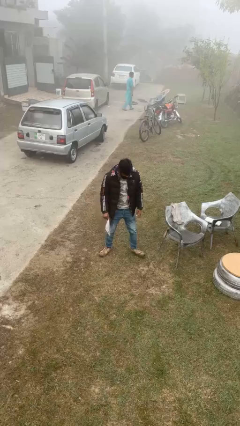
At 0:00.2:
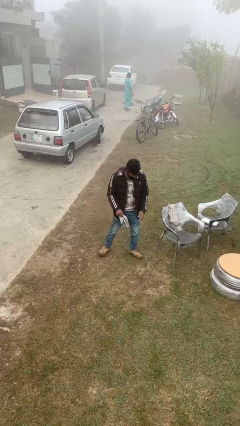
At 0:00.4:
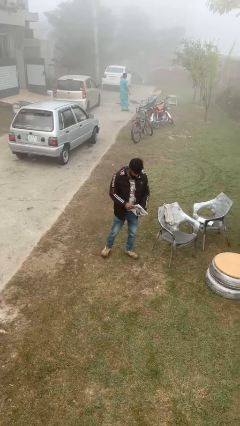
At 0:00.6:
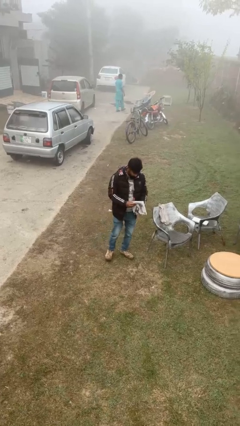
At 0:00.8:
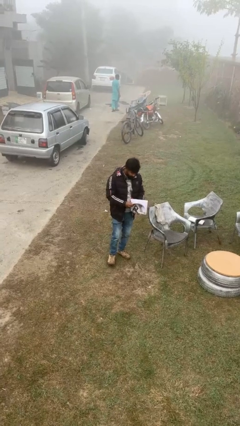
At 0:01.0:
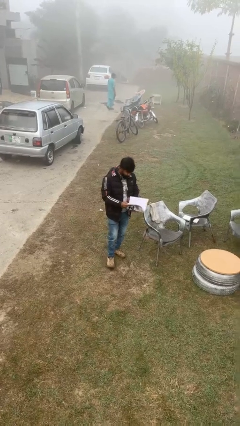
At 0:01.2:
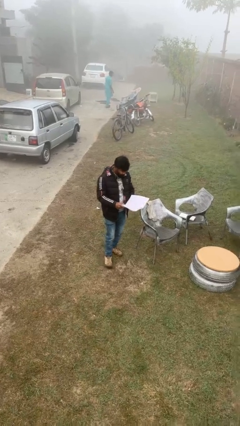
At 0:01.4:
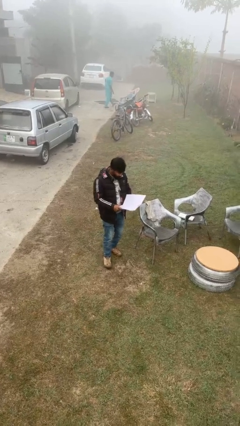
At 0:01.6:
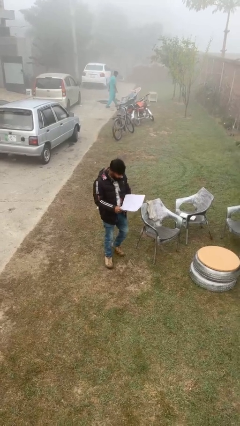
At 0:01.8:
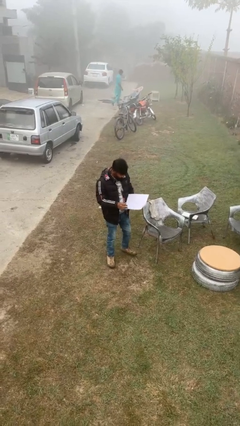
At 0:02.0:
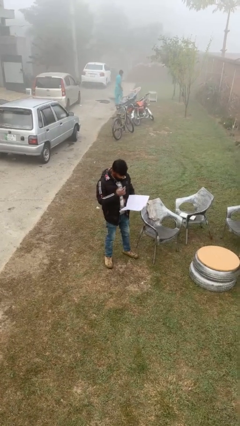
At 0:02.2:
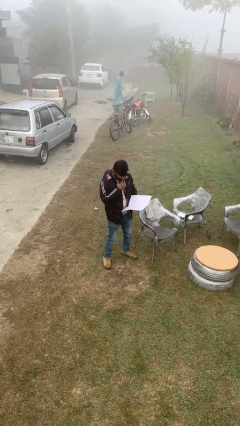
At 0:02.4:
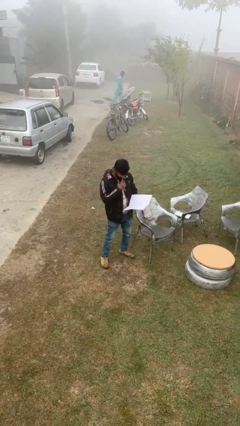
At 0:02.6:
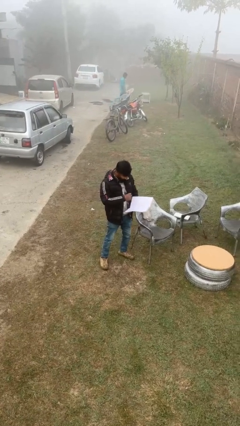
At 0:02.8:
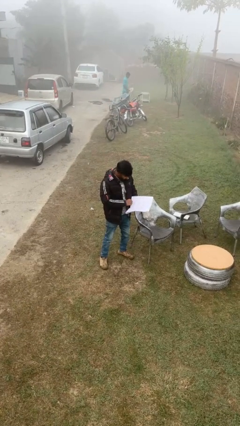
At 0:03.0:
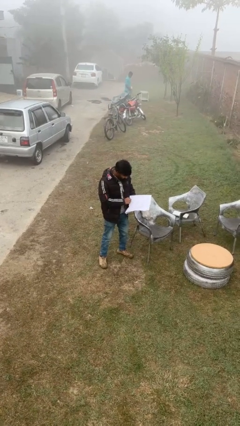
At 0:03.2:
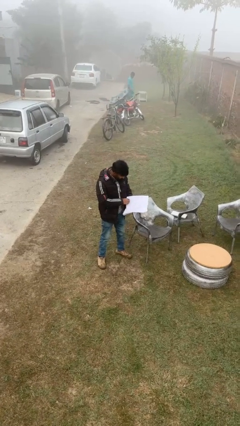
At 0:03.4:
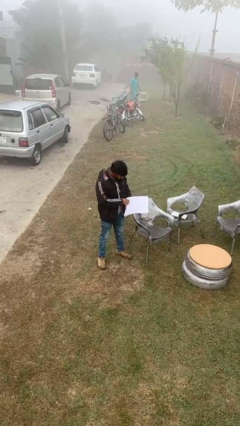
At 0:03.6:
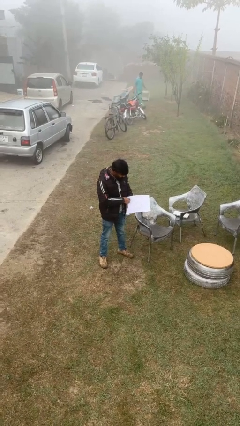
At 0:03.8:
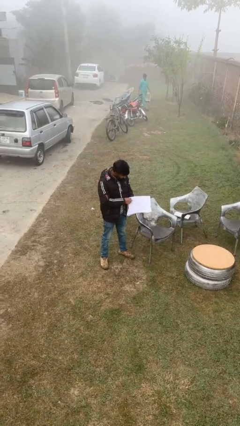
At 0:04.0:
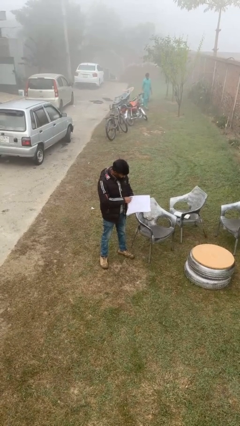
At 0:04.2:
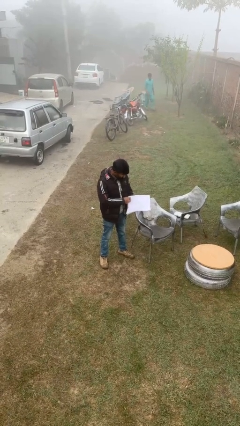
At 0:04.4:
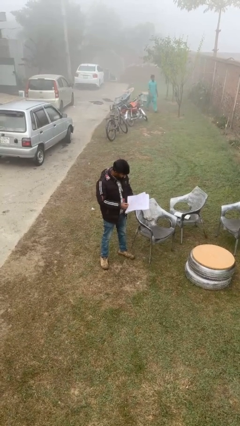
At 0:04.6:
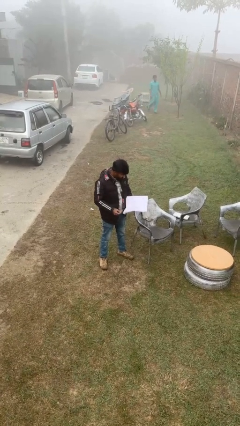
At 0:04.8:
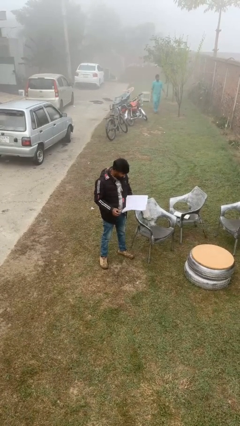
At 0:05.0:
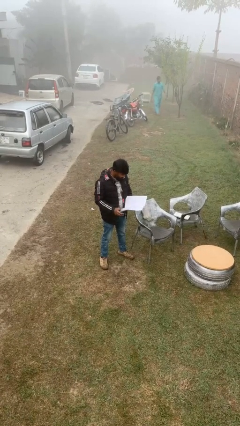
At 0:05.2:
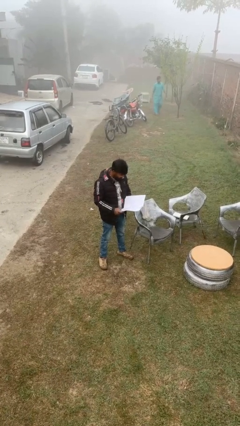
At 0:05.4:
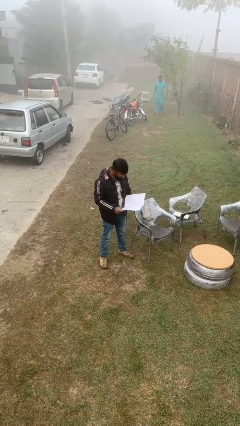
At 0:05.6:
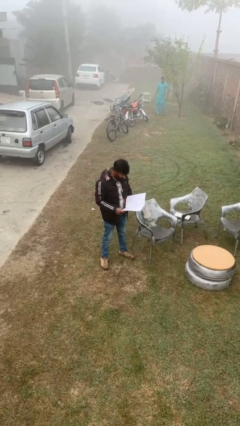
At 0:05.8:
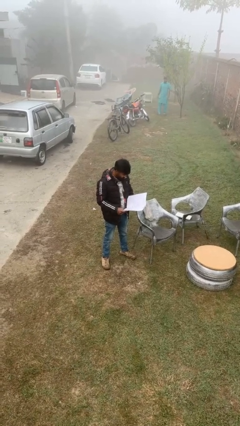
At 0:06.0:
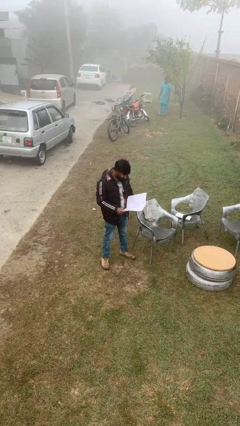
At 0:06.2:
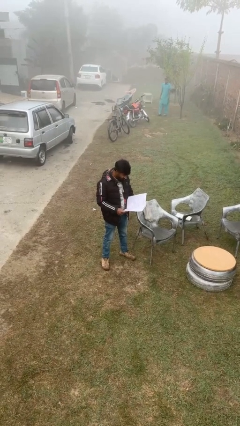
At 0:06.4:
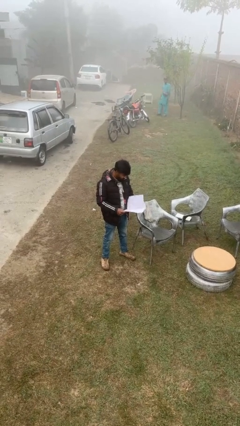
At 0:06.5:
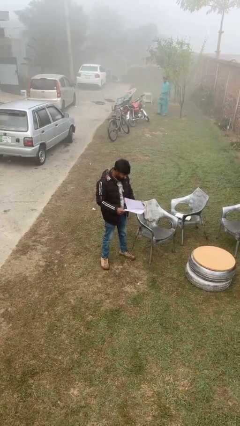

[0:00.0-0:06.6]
person reads document

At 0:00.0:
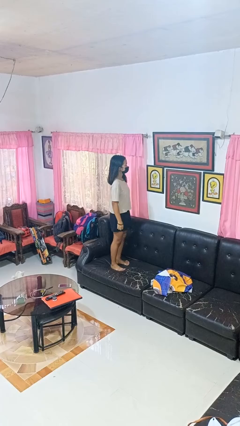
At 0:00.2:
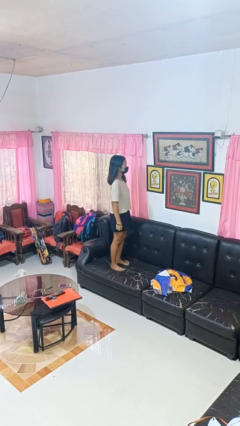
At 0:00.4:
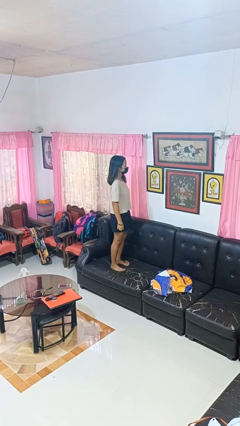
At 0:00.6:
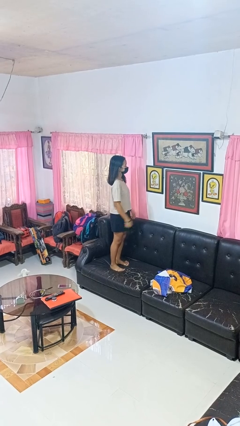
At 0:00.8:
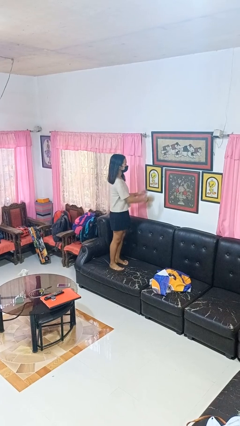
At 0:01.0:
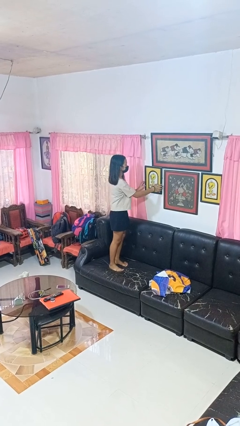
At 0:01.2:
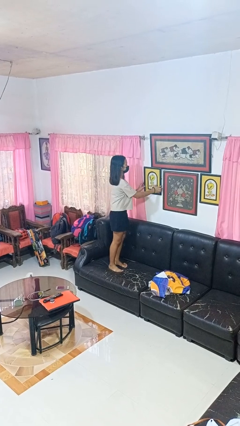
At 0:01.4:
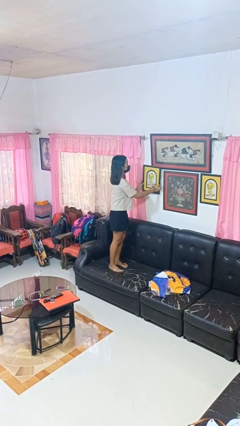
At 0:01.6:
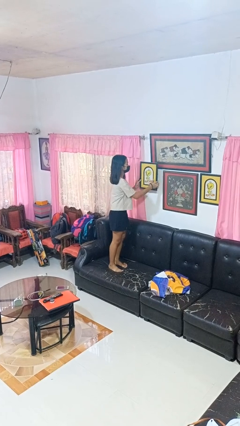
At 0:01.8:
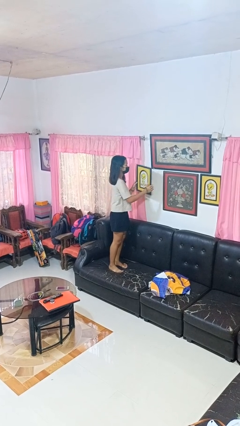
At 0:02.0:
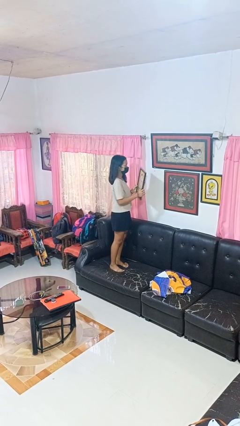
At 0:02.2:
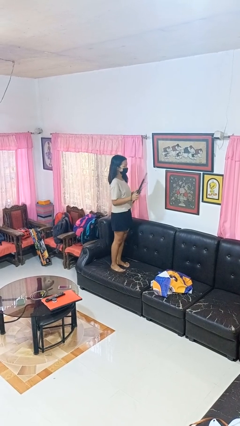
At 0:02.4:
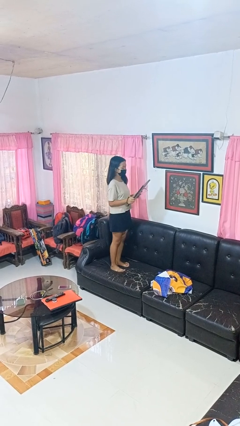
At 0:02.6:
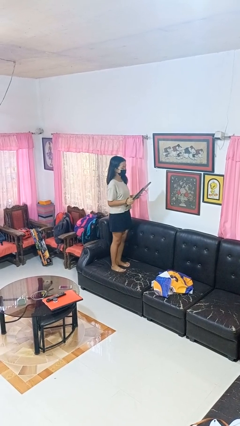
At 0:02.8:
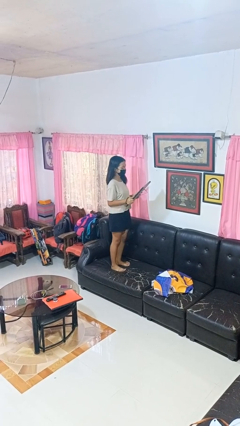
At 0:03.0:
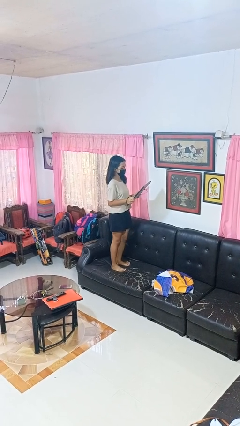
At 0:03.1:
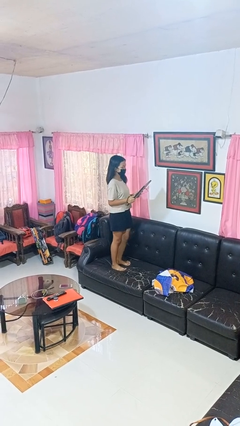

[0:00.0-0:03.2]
person takes down picture frame

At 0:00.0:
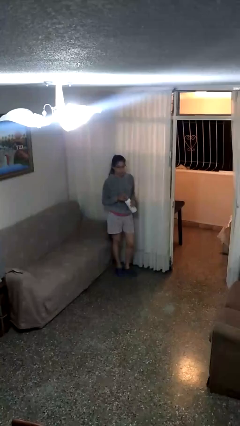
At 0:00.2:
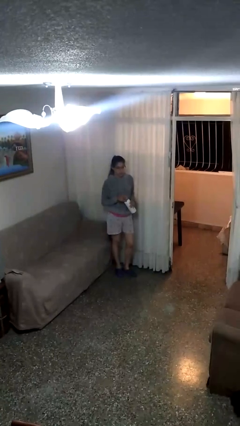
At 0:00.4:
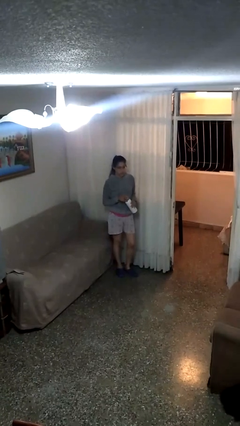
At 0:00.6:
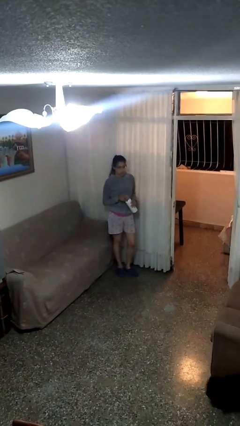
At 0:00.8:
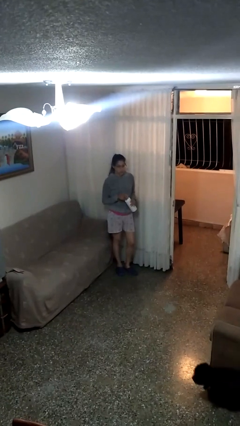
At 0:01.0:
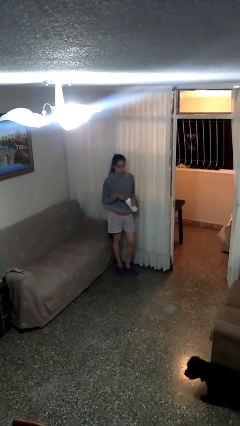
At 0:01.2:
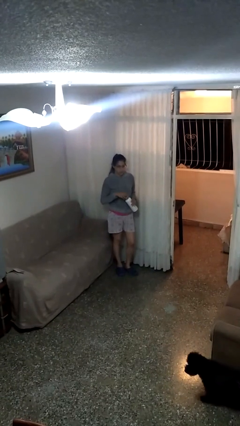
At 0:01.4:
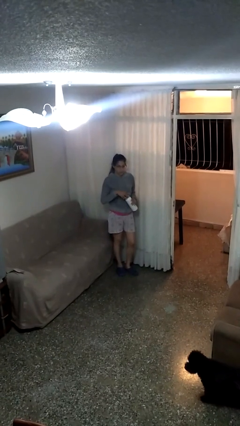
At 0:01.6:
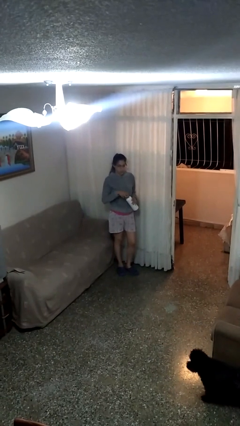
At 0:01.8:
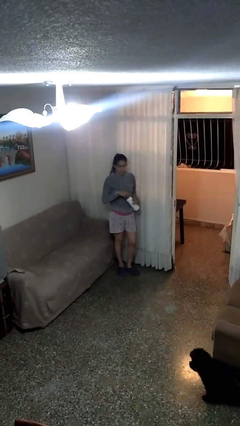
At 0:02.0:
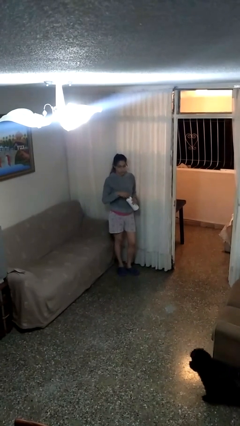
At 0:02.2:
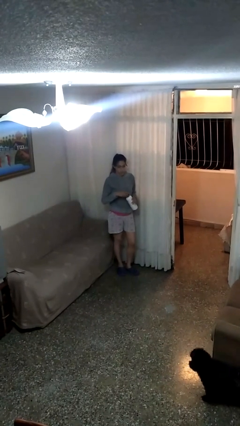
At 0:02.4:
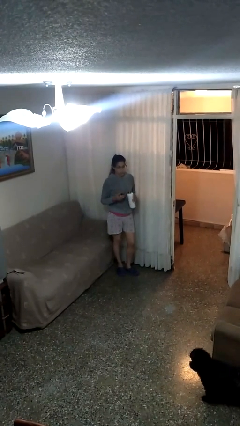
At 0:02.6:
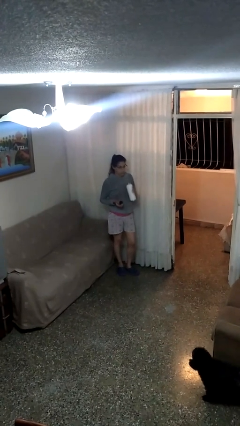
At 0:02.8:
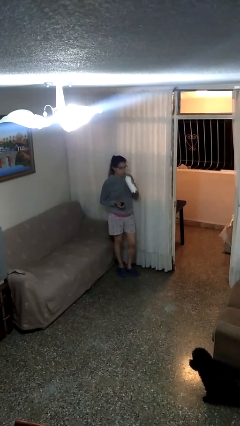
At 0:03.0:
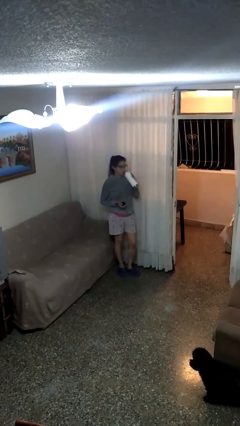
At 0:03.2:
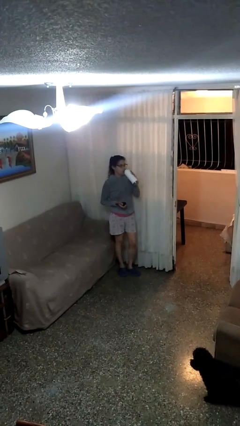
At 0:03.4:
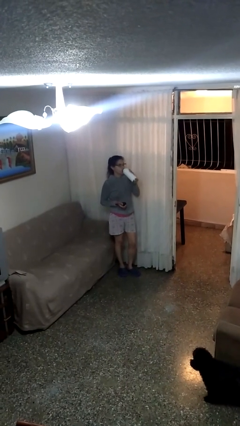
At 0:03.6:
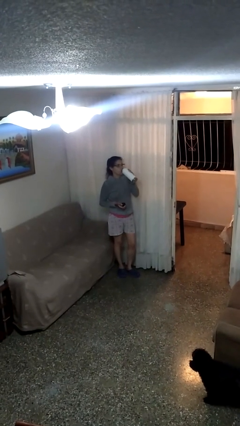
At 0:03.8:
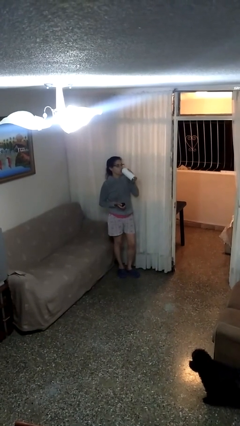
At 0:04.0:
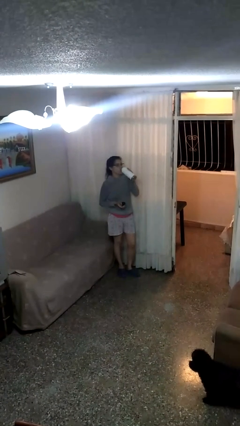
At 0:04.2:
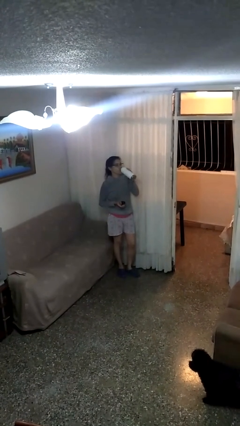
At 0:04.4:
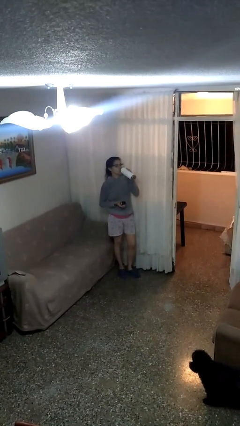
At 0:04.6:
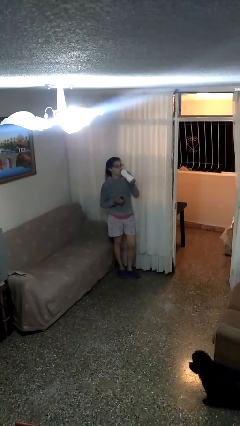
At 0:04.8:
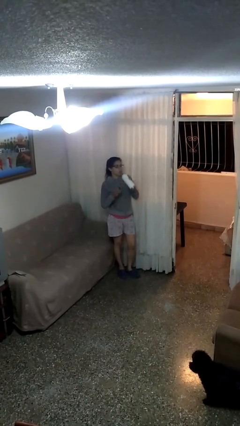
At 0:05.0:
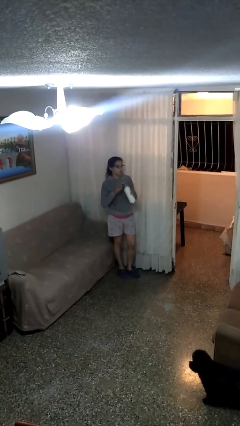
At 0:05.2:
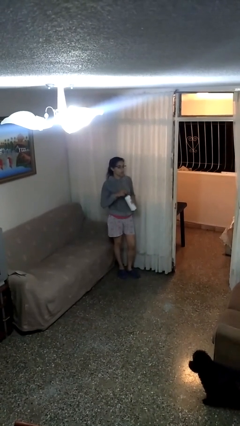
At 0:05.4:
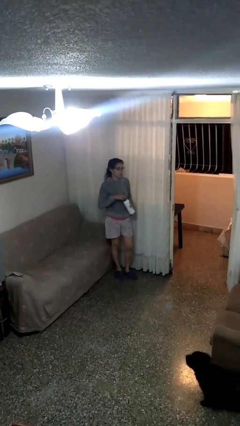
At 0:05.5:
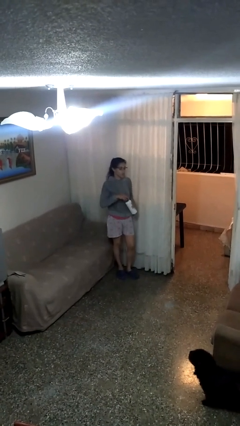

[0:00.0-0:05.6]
person drinks from bottle

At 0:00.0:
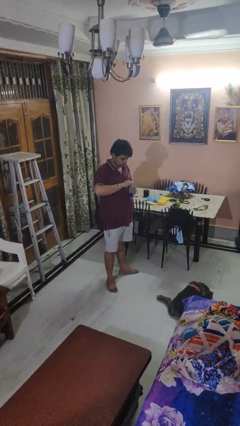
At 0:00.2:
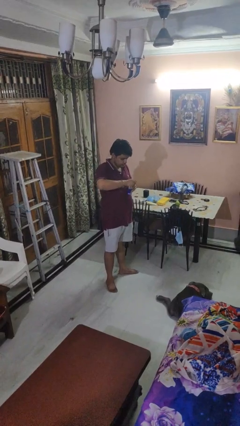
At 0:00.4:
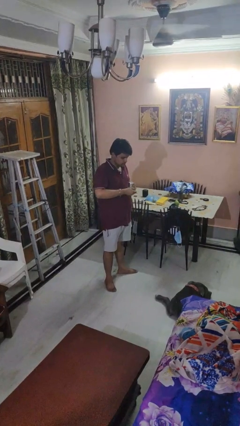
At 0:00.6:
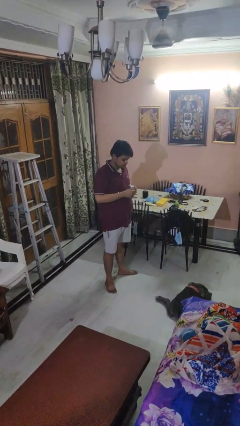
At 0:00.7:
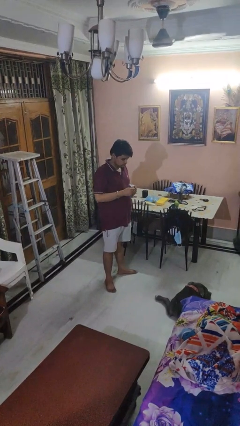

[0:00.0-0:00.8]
person opens beverage can

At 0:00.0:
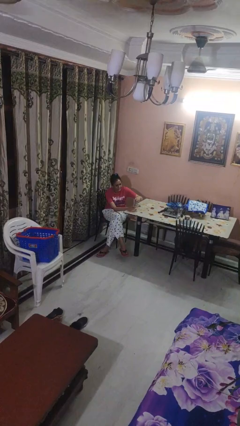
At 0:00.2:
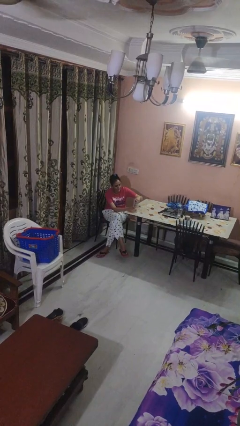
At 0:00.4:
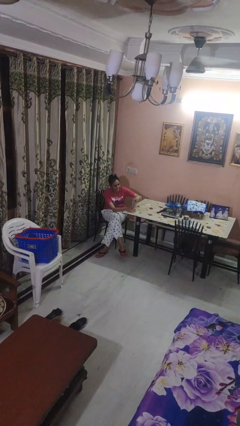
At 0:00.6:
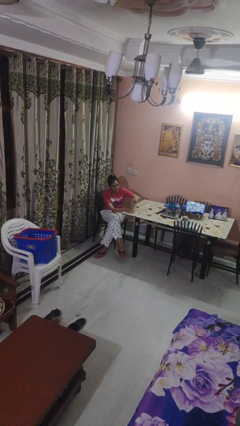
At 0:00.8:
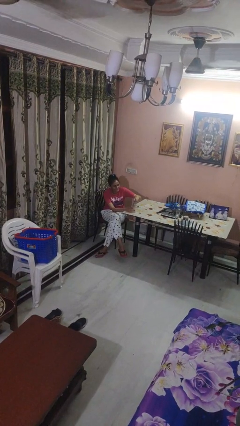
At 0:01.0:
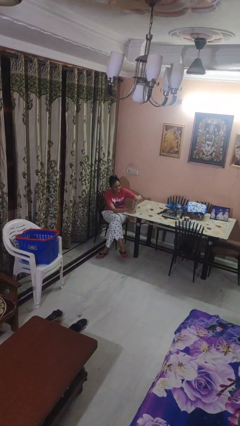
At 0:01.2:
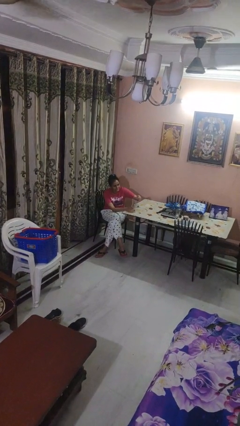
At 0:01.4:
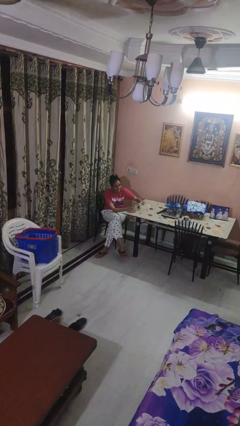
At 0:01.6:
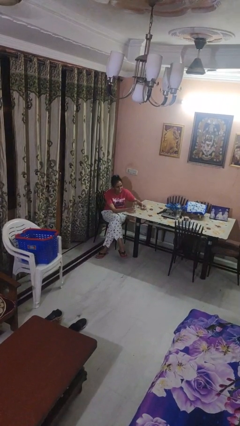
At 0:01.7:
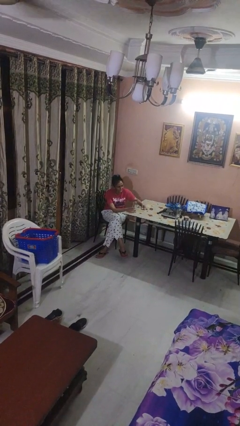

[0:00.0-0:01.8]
person unscrews lid from bottle
